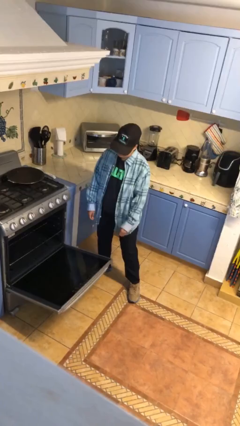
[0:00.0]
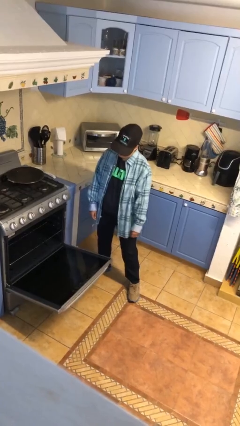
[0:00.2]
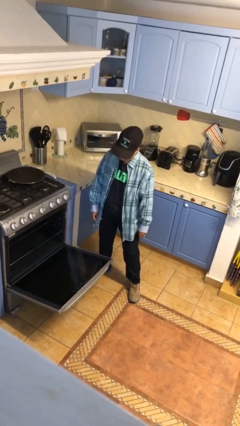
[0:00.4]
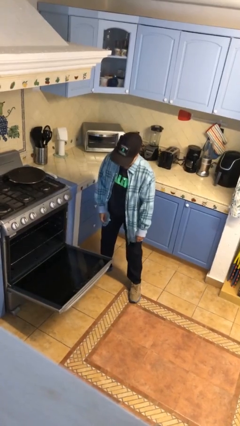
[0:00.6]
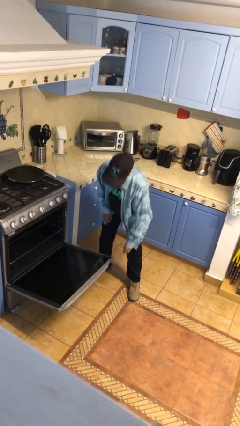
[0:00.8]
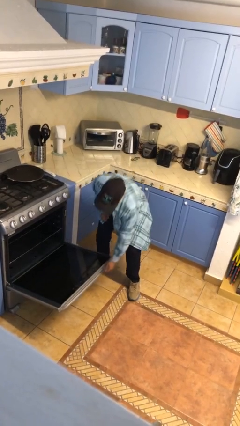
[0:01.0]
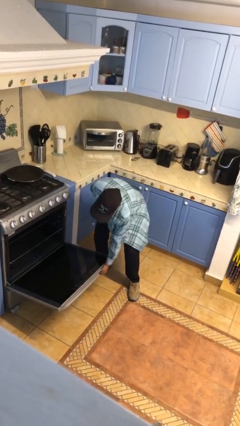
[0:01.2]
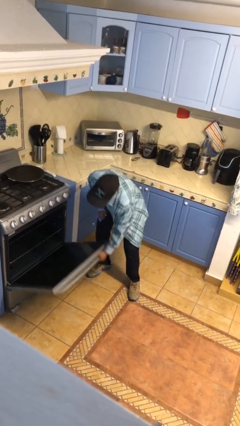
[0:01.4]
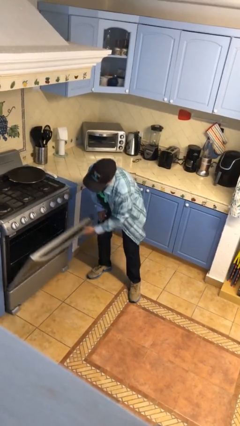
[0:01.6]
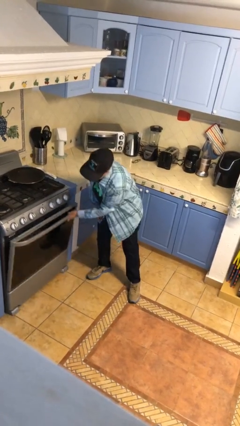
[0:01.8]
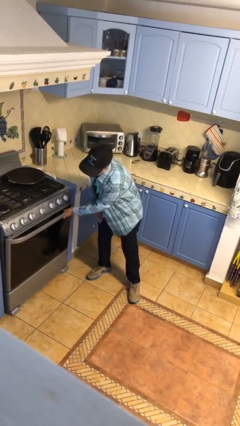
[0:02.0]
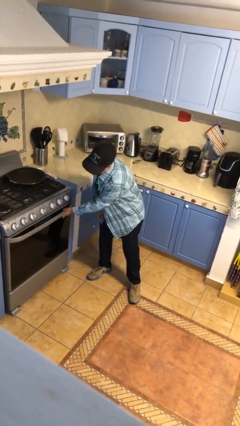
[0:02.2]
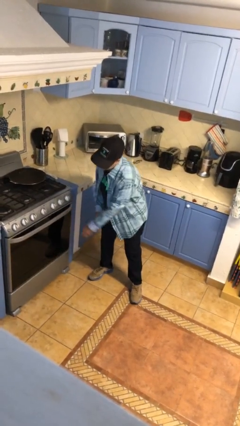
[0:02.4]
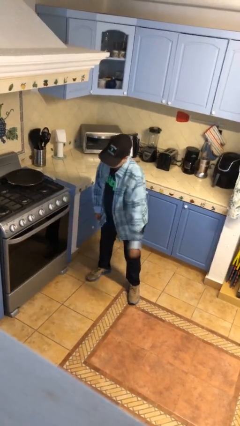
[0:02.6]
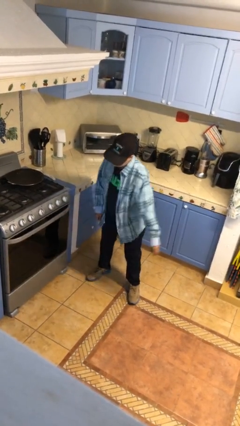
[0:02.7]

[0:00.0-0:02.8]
person closes oven door

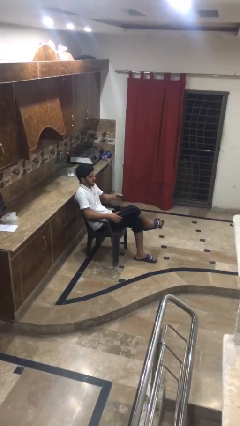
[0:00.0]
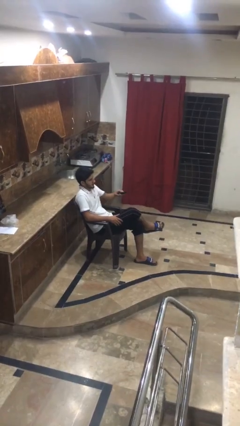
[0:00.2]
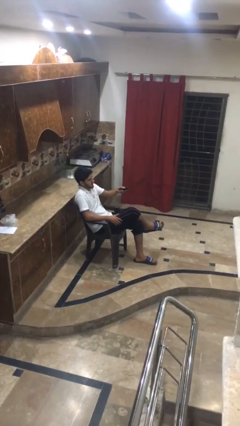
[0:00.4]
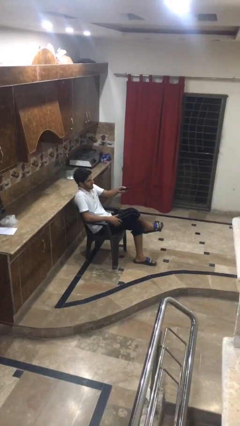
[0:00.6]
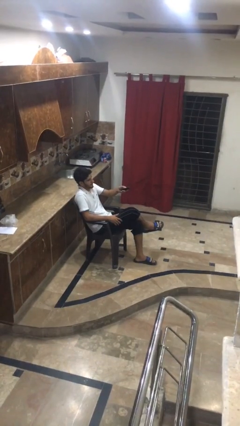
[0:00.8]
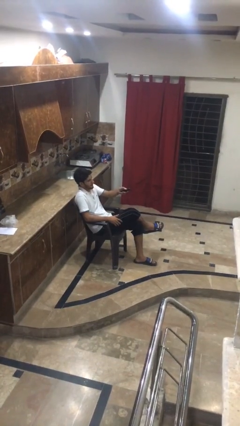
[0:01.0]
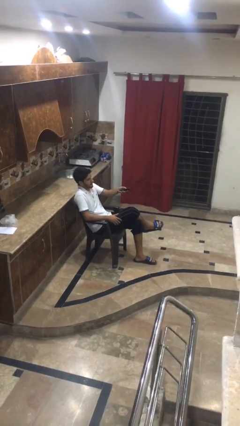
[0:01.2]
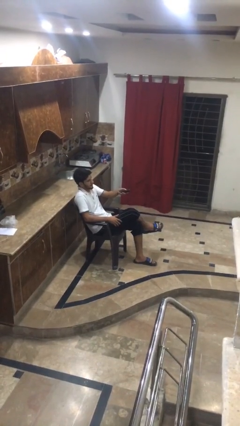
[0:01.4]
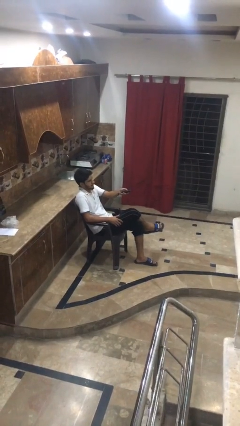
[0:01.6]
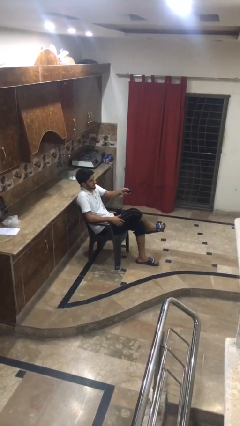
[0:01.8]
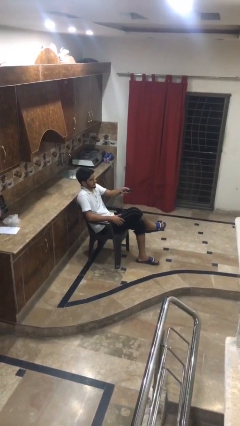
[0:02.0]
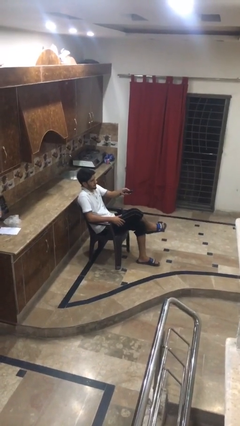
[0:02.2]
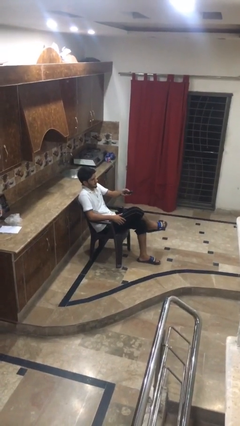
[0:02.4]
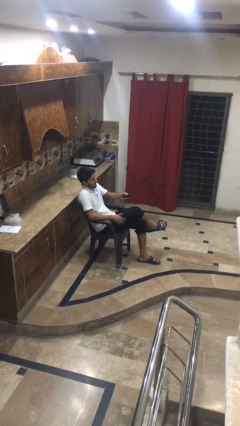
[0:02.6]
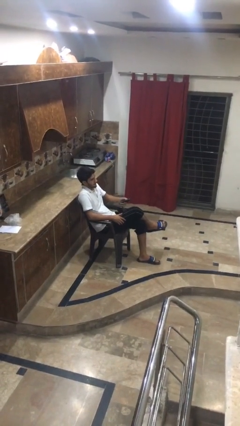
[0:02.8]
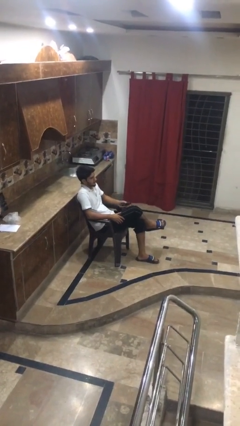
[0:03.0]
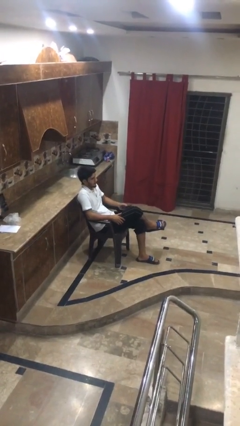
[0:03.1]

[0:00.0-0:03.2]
person uses television remote

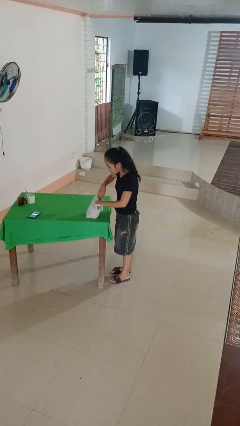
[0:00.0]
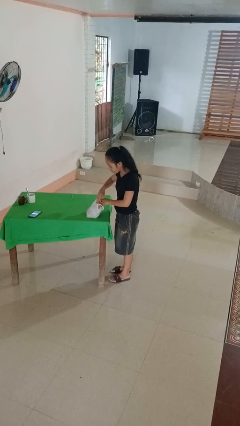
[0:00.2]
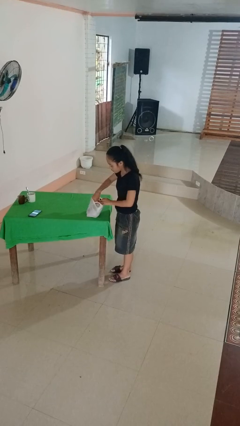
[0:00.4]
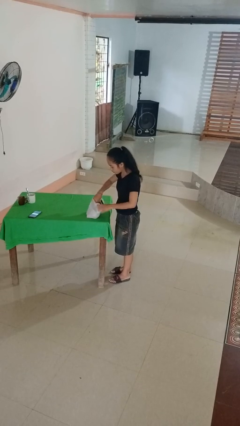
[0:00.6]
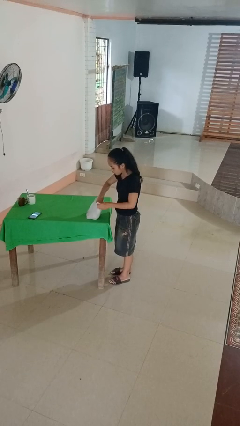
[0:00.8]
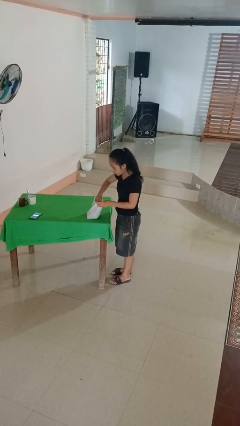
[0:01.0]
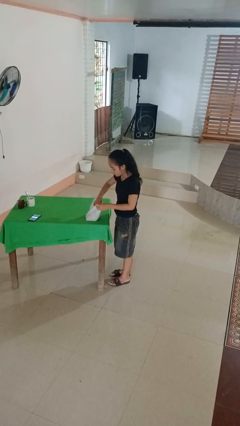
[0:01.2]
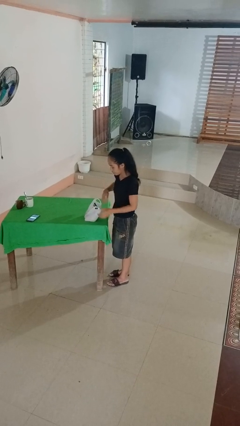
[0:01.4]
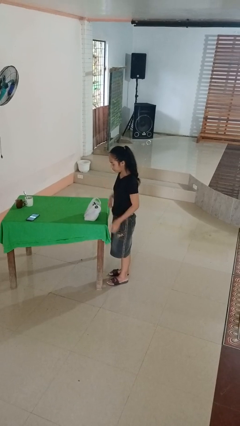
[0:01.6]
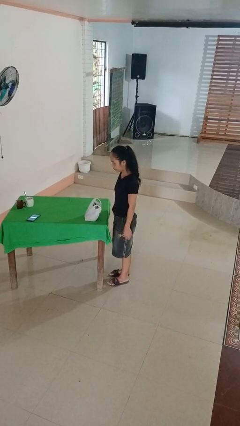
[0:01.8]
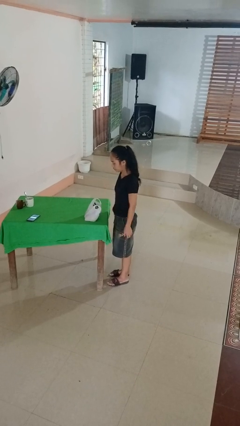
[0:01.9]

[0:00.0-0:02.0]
person searches in bag

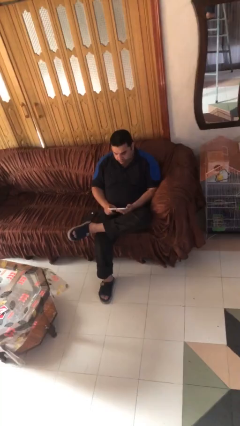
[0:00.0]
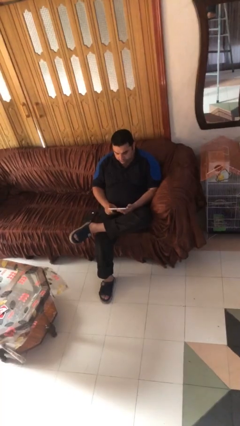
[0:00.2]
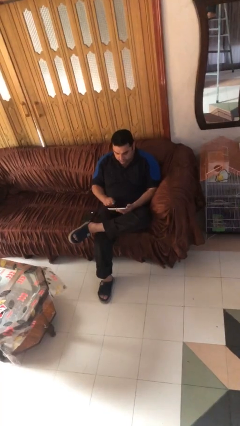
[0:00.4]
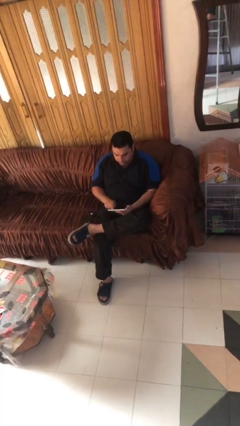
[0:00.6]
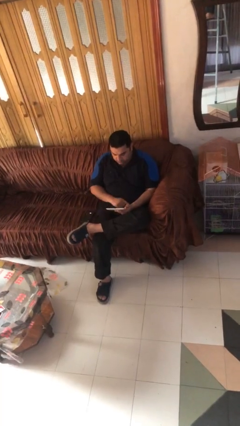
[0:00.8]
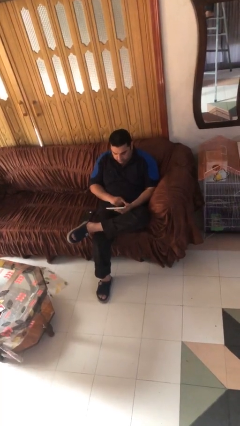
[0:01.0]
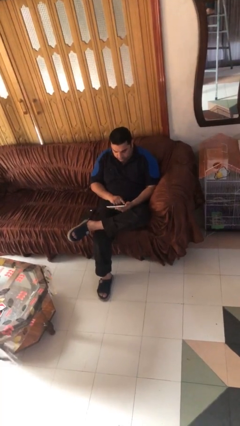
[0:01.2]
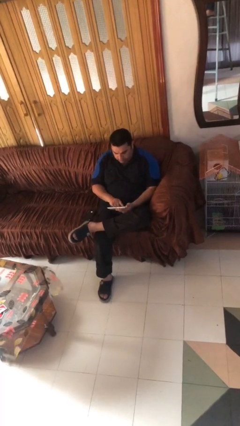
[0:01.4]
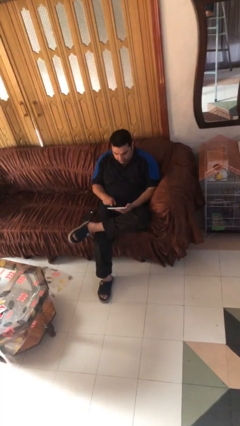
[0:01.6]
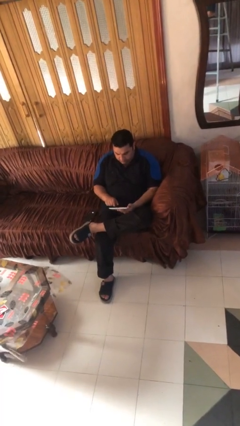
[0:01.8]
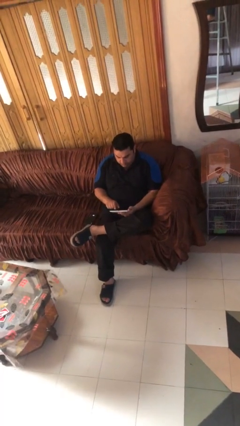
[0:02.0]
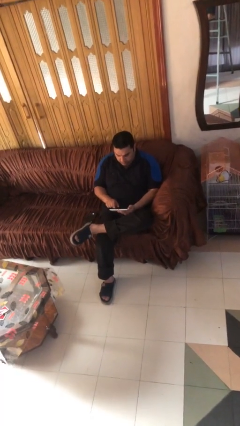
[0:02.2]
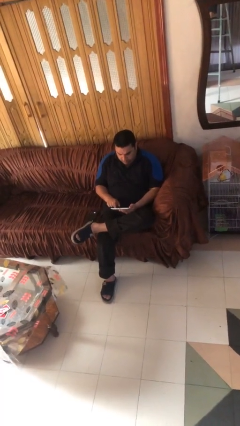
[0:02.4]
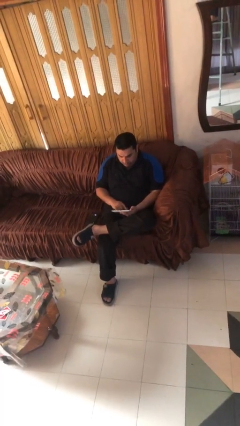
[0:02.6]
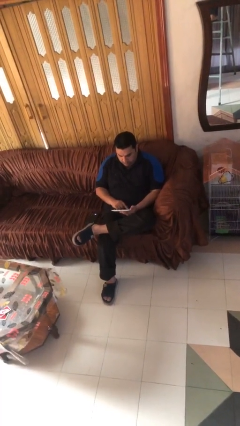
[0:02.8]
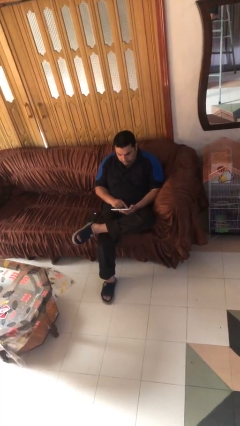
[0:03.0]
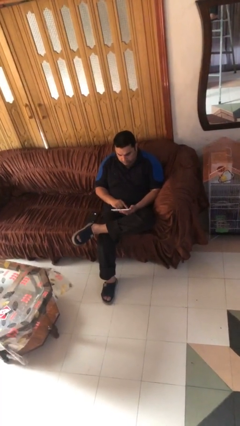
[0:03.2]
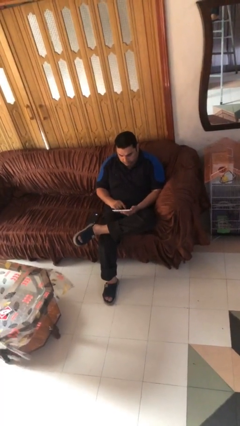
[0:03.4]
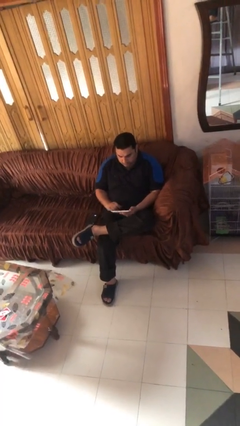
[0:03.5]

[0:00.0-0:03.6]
person interacts with tablet

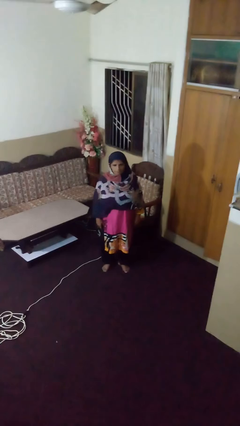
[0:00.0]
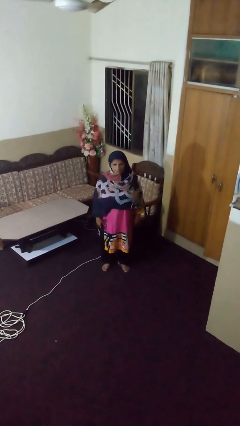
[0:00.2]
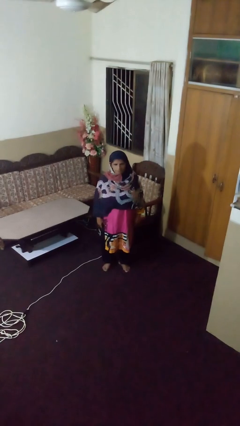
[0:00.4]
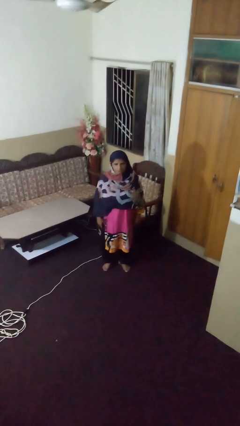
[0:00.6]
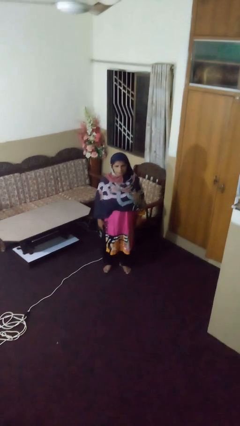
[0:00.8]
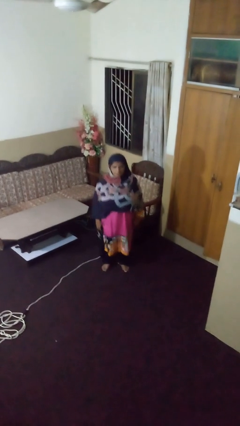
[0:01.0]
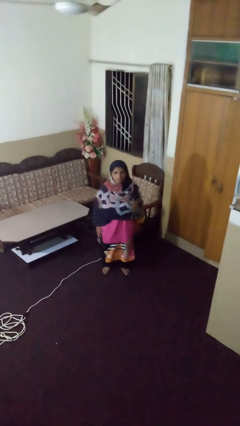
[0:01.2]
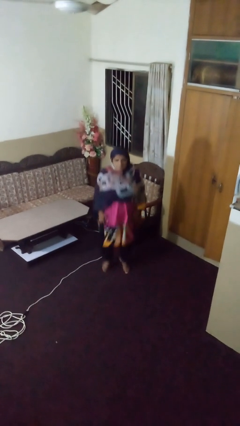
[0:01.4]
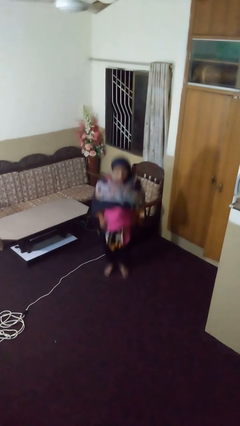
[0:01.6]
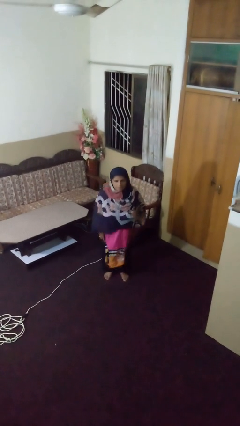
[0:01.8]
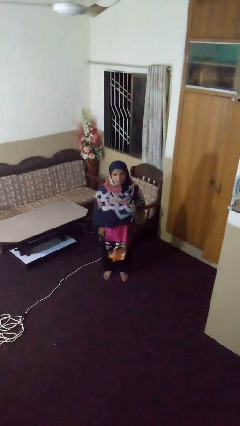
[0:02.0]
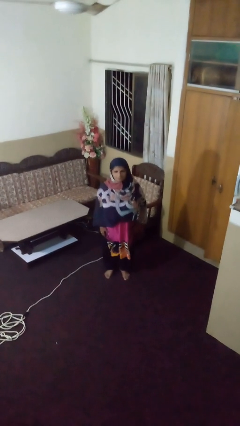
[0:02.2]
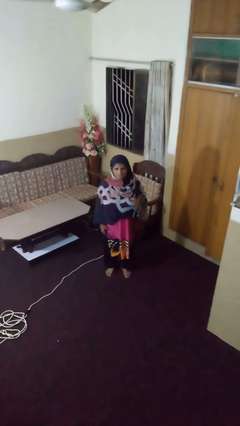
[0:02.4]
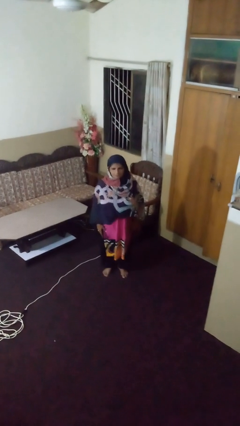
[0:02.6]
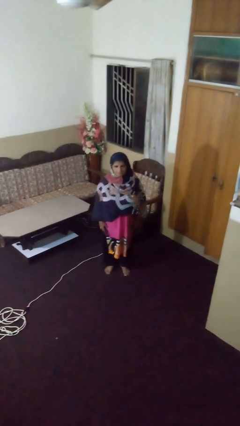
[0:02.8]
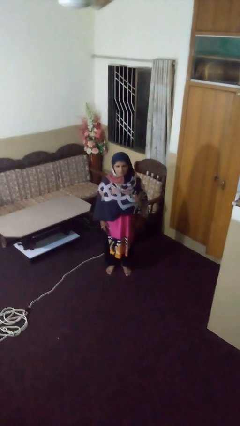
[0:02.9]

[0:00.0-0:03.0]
person jumps

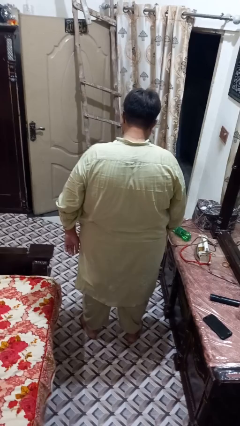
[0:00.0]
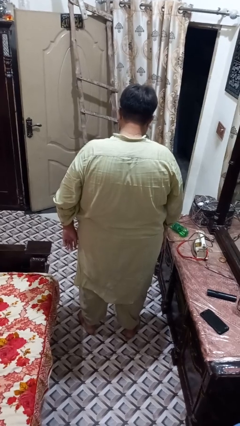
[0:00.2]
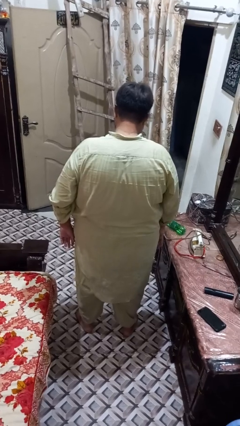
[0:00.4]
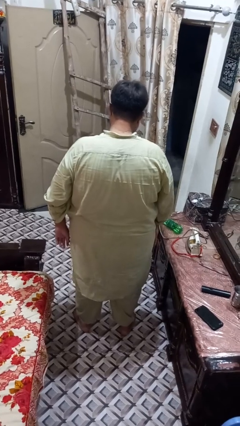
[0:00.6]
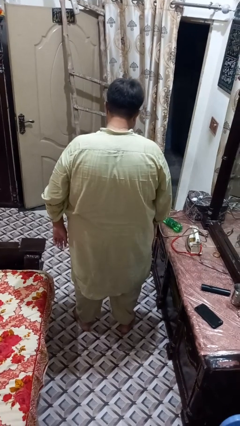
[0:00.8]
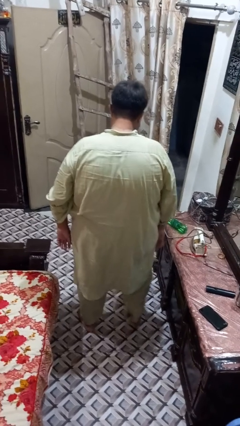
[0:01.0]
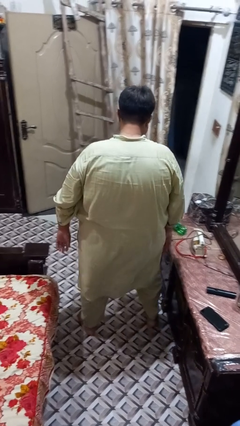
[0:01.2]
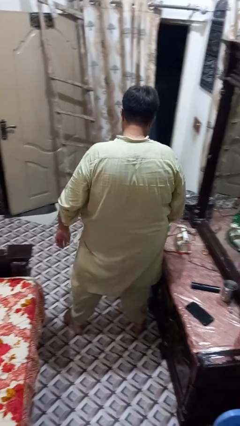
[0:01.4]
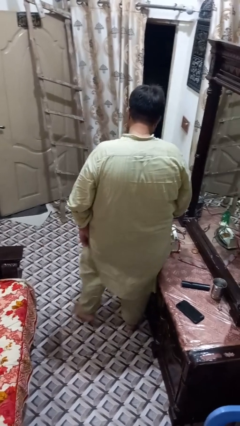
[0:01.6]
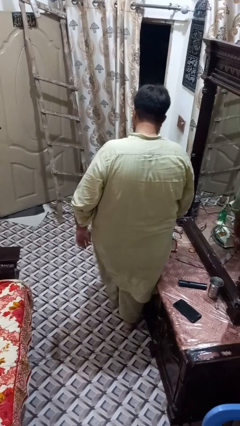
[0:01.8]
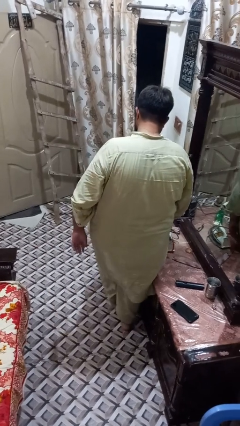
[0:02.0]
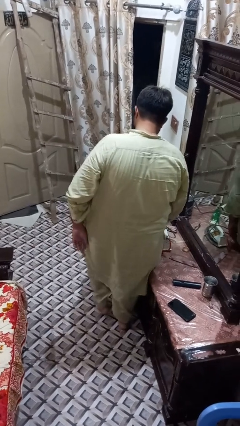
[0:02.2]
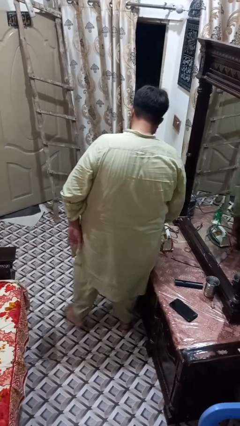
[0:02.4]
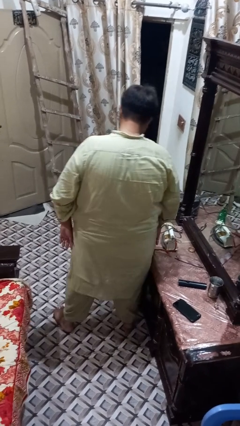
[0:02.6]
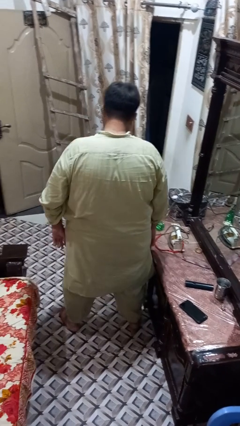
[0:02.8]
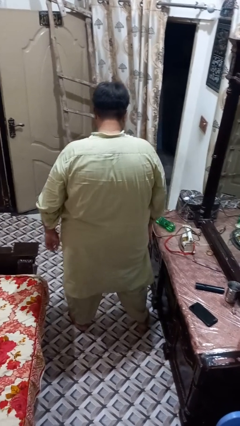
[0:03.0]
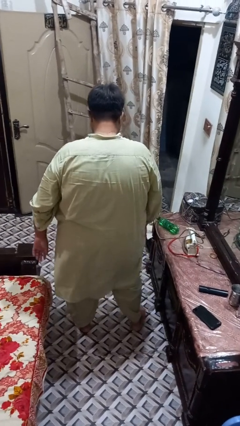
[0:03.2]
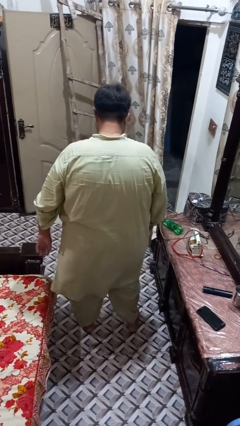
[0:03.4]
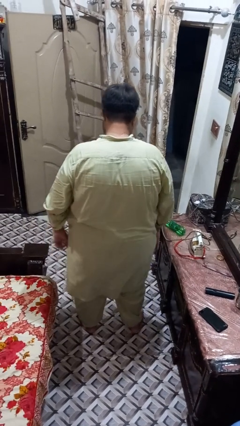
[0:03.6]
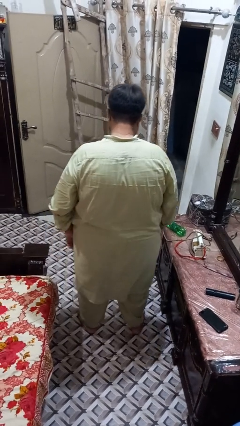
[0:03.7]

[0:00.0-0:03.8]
person bumps into table
